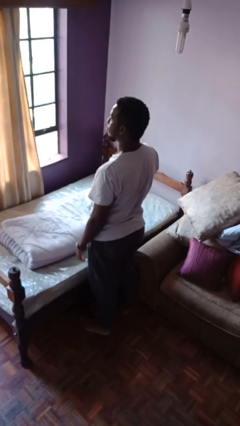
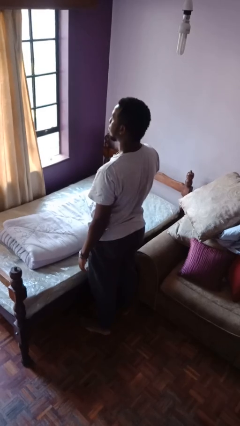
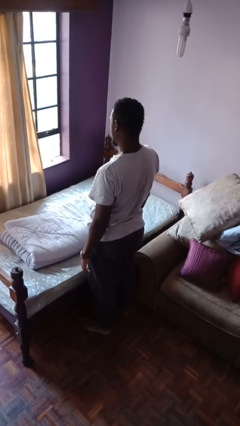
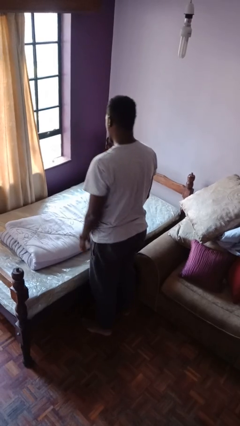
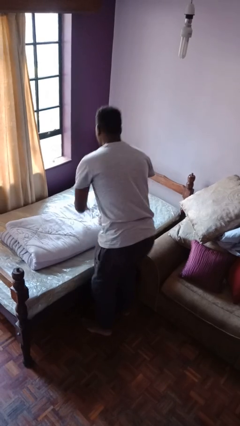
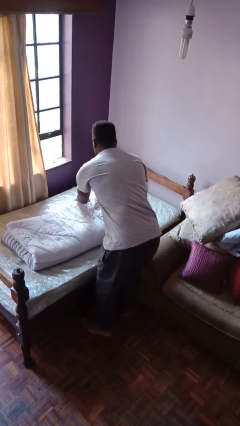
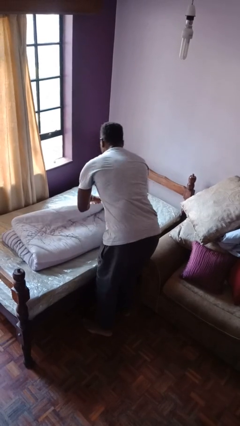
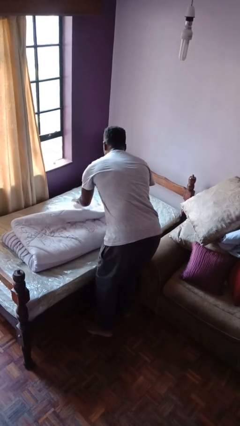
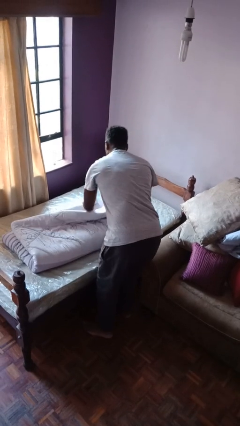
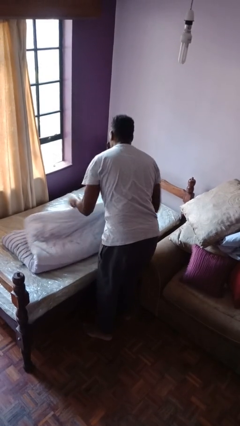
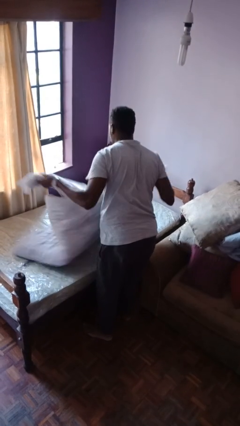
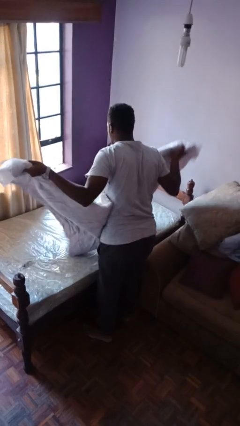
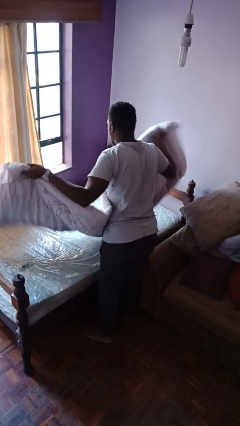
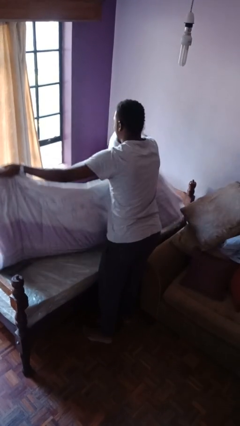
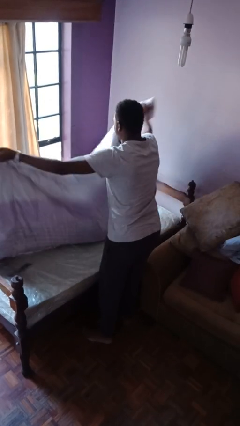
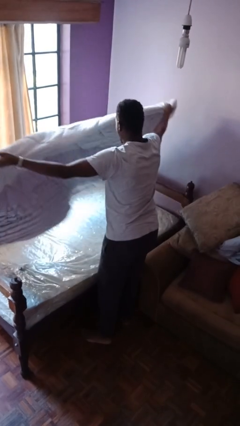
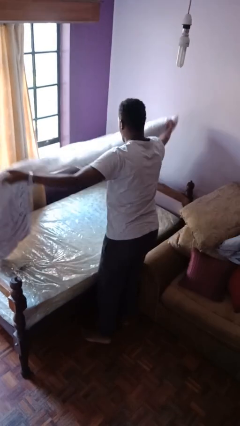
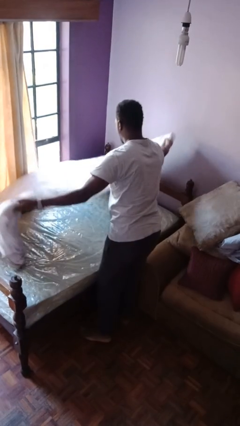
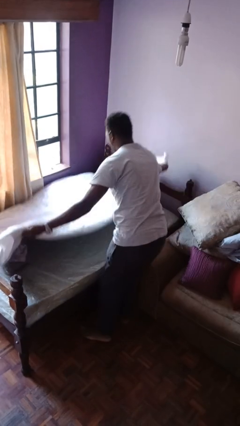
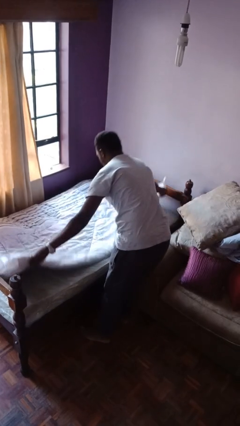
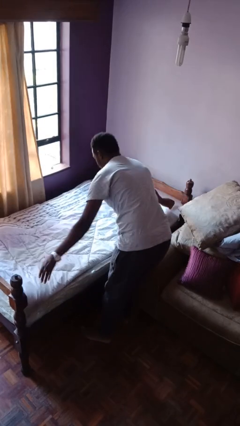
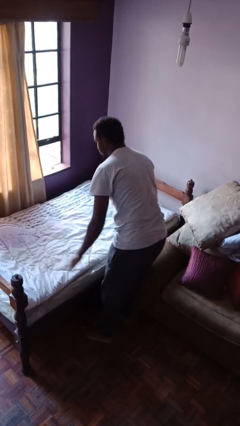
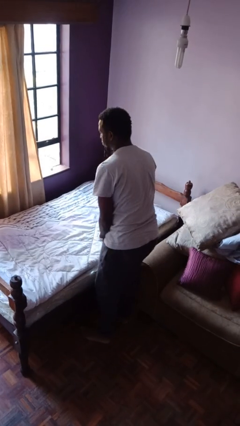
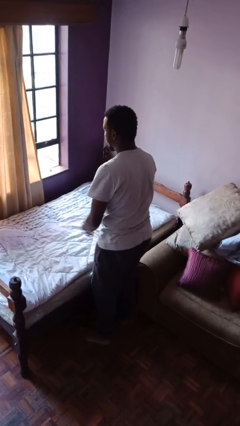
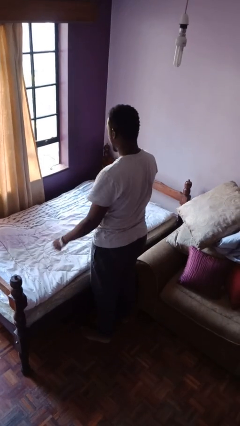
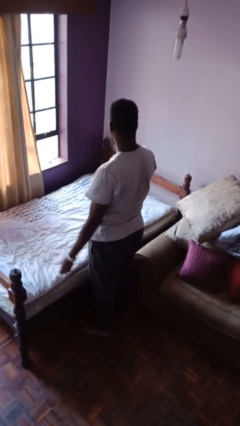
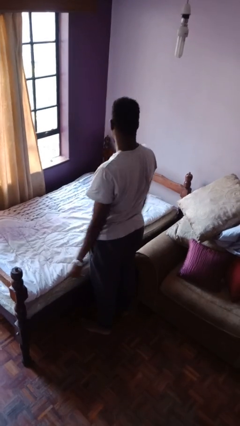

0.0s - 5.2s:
person unfolds blanket

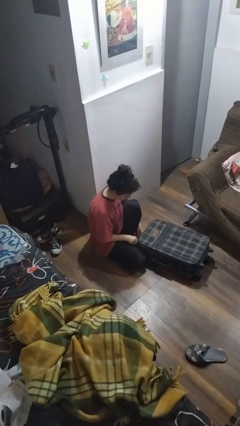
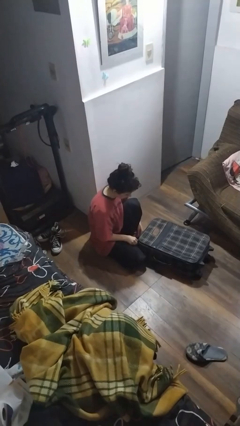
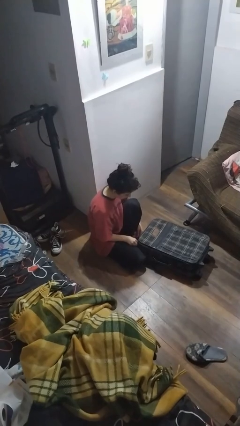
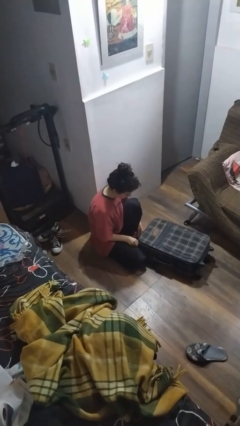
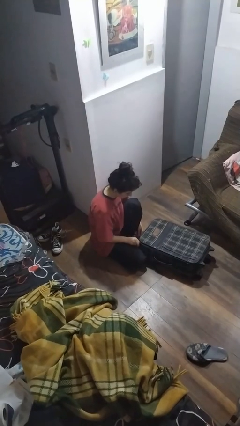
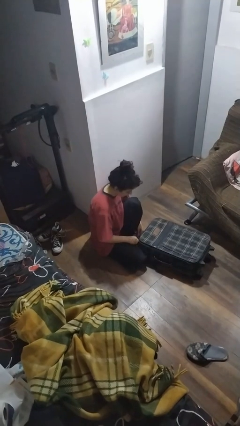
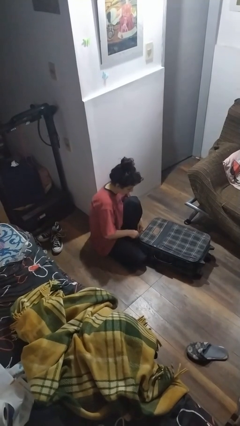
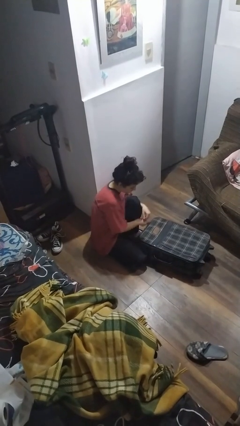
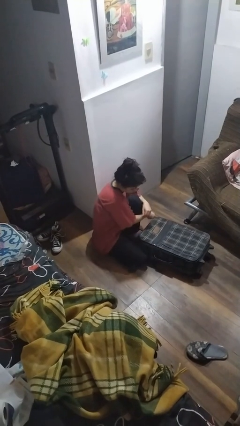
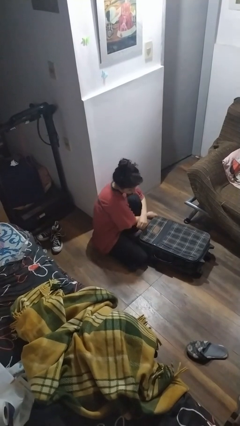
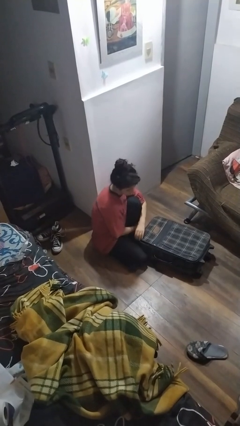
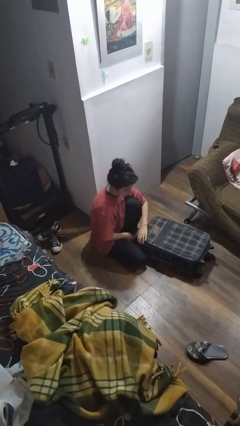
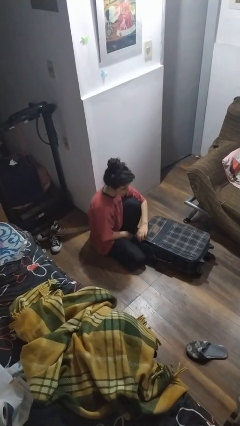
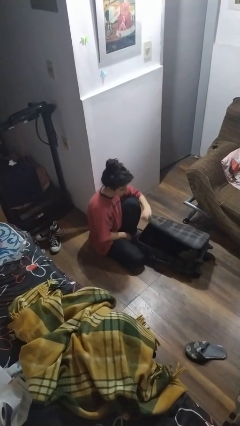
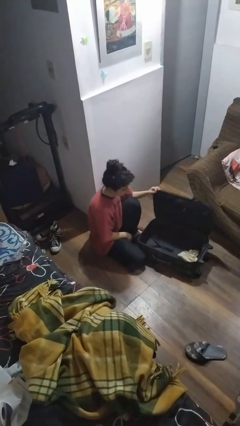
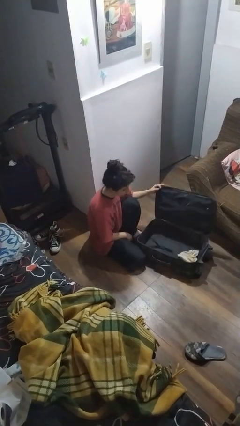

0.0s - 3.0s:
person opens suitcase

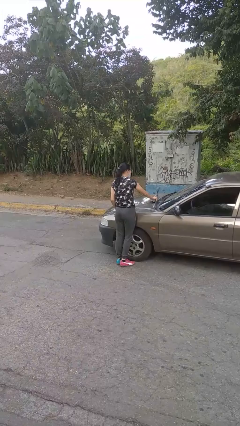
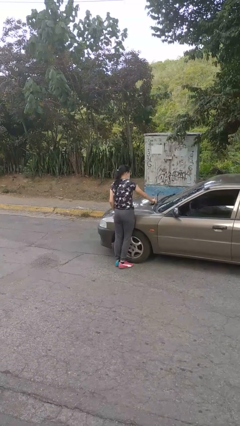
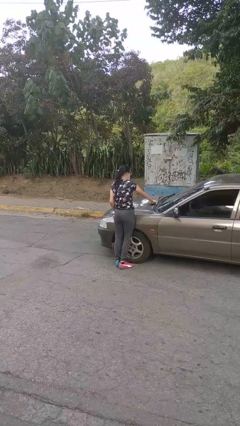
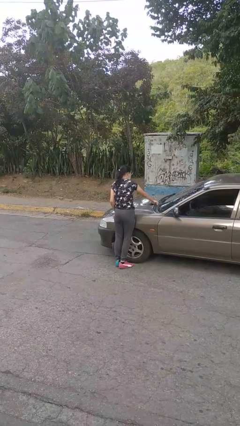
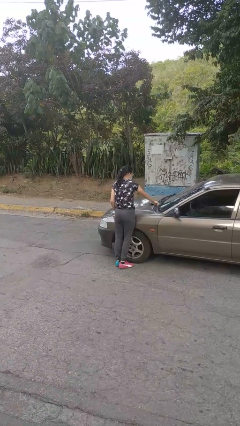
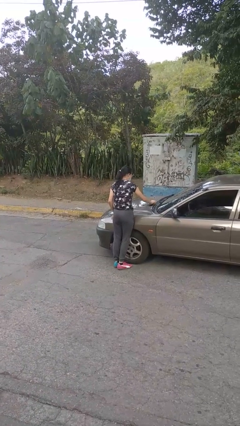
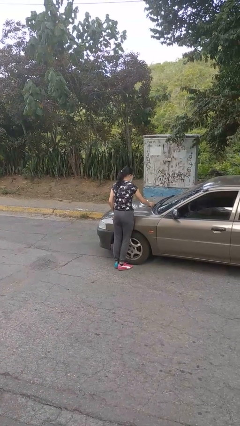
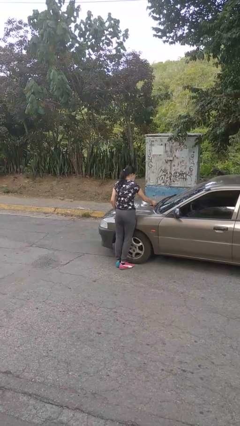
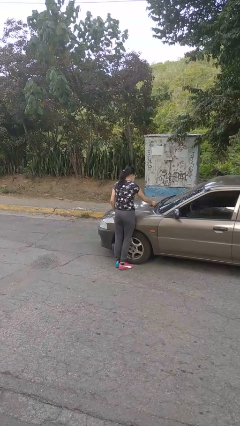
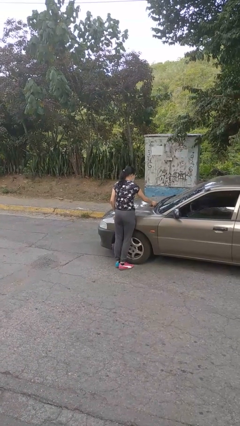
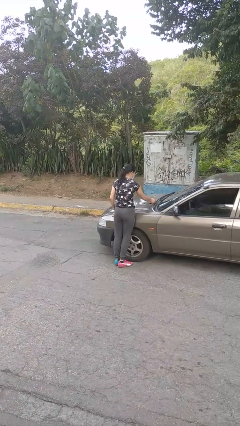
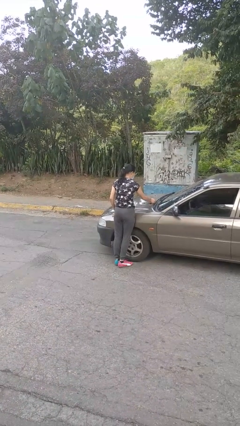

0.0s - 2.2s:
person flips down car wipers

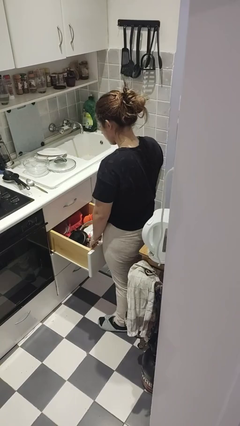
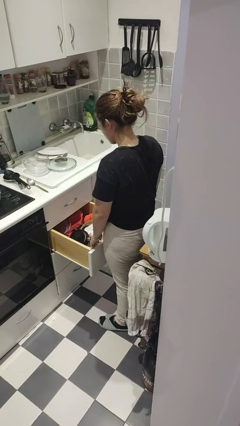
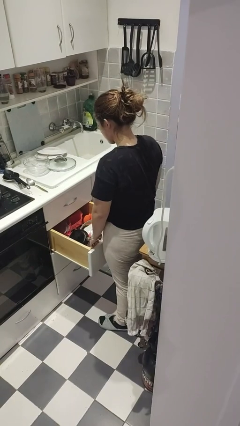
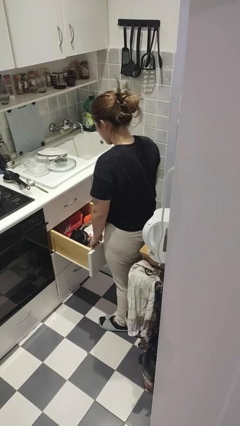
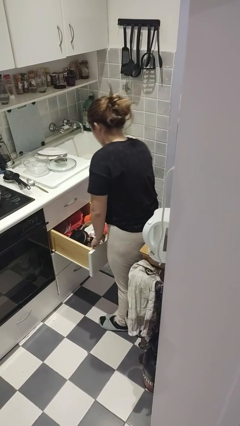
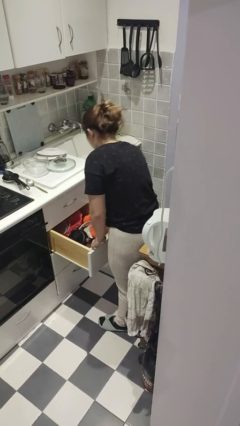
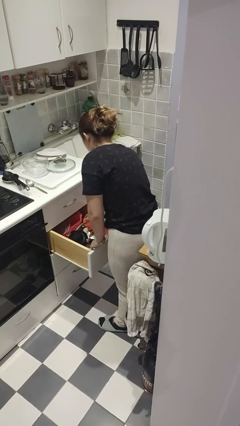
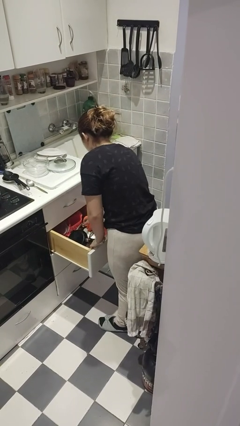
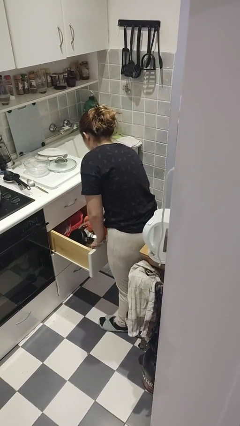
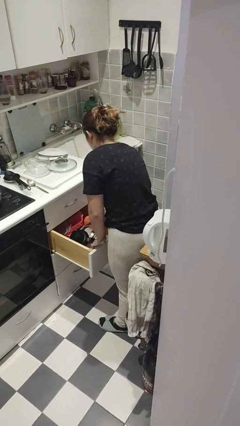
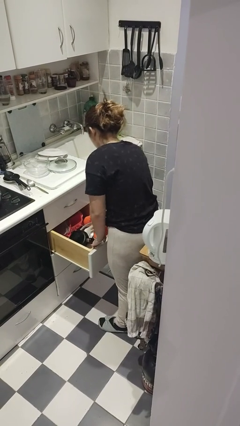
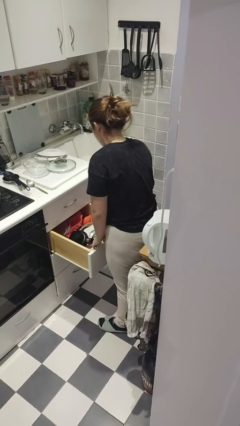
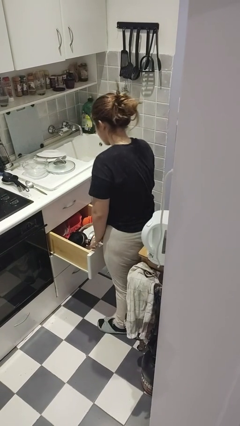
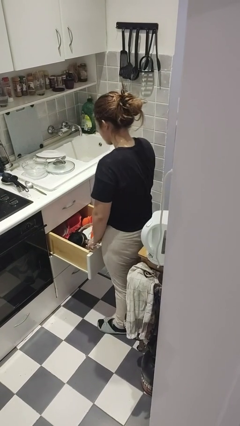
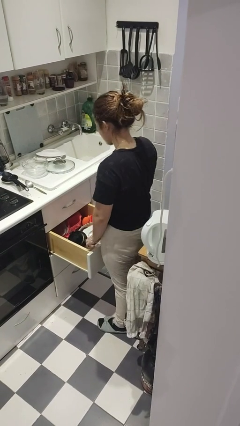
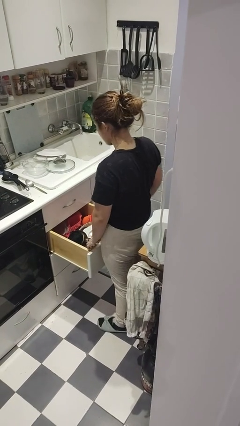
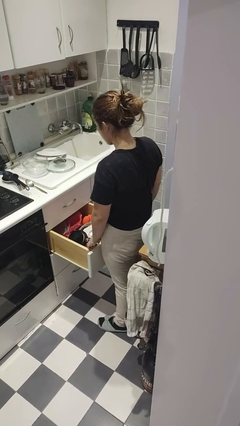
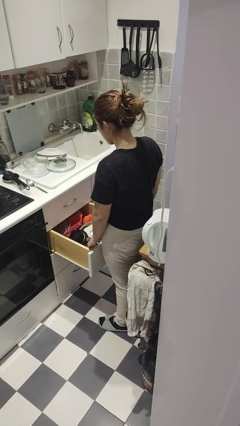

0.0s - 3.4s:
person searches in kitchen drawer

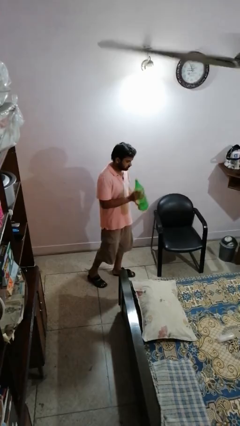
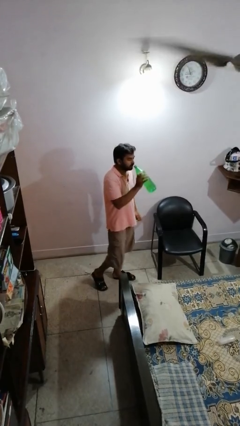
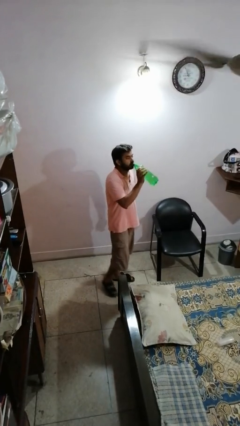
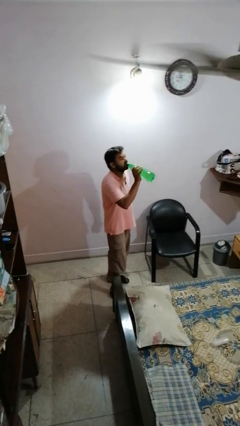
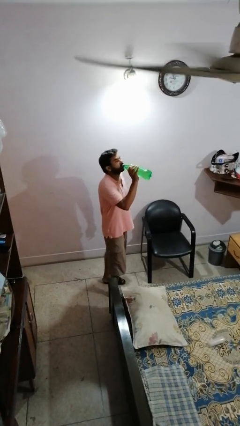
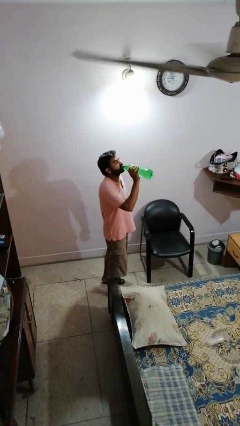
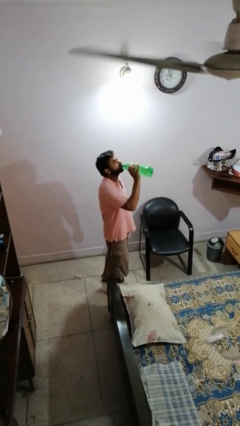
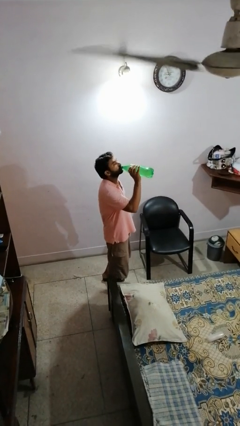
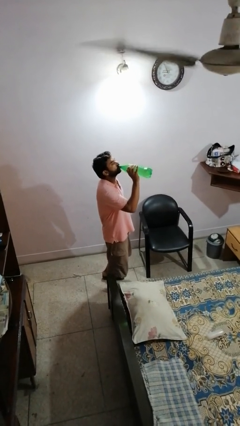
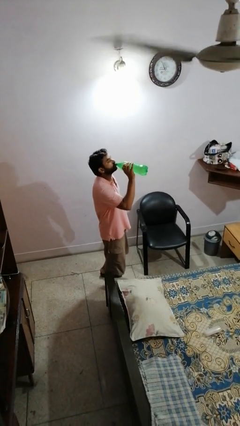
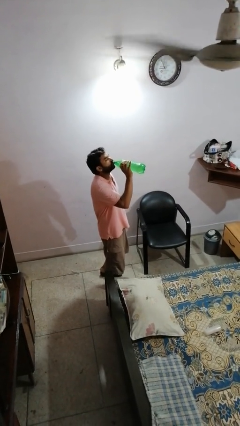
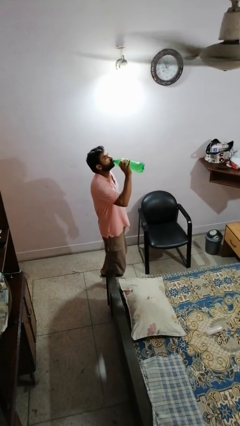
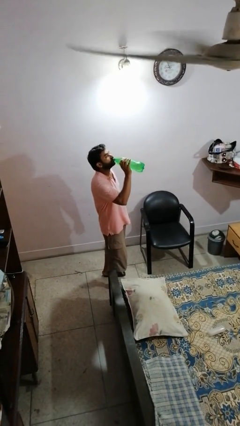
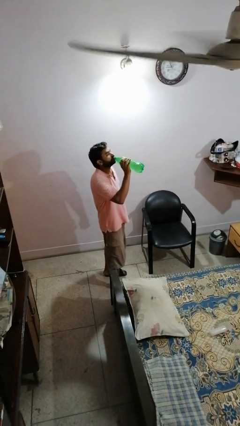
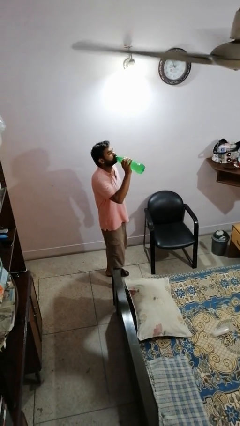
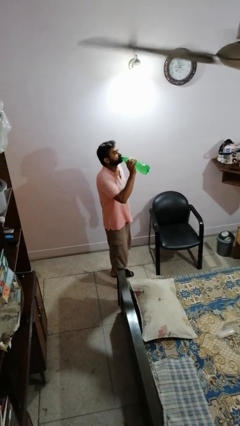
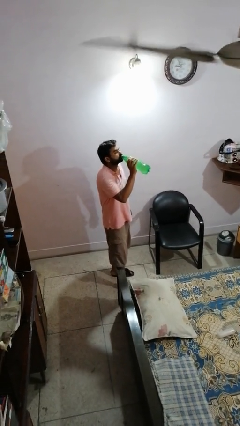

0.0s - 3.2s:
person drinks from bottle

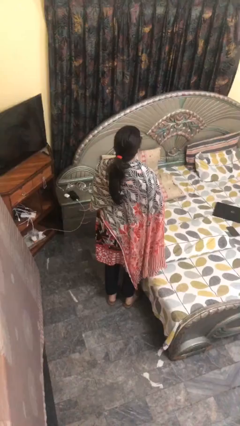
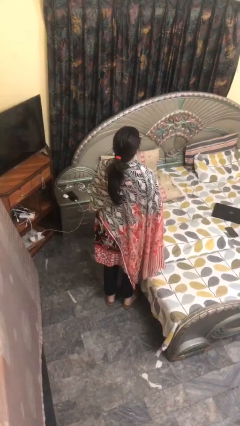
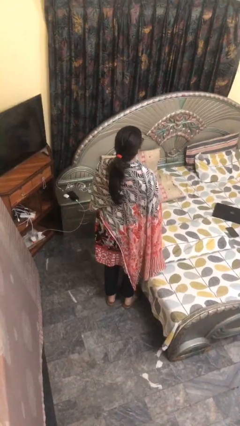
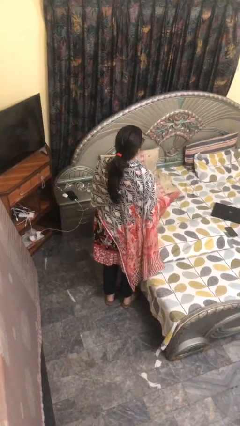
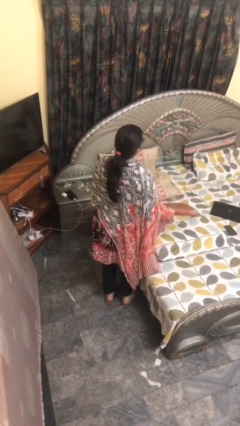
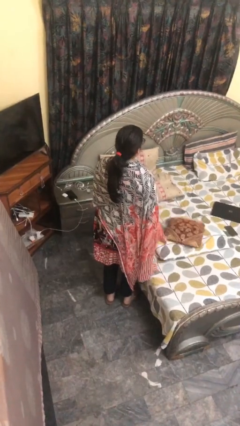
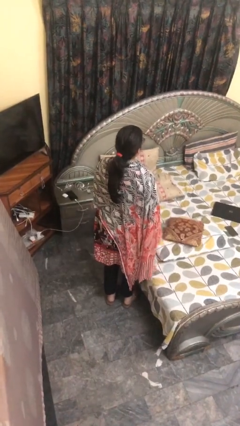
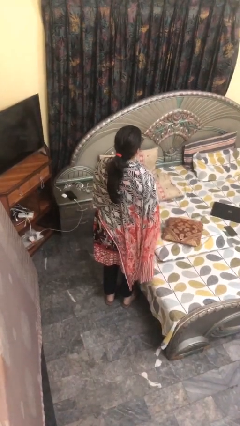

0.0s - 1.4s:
person throws object on bed
